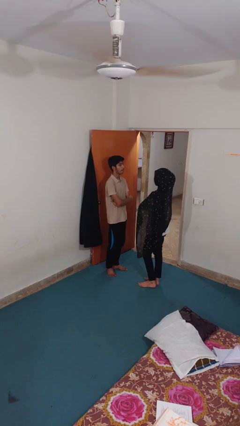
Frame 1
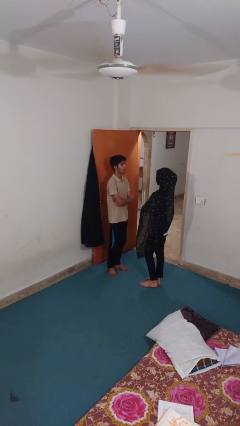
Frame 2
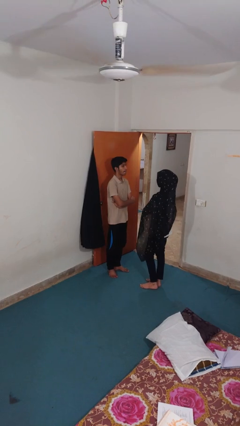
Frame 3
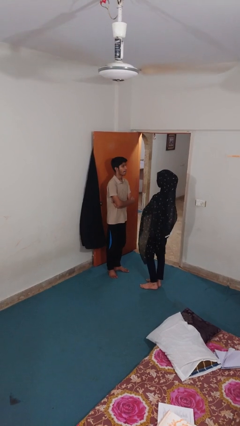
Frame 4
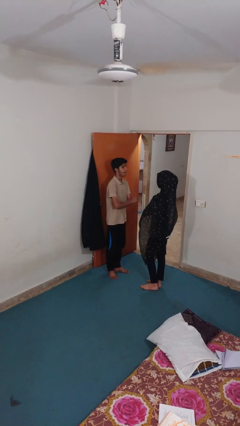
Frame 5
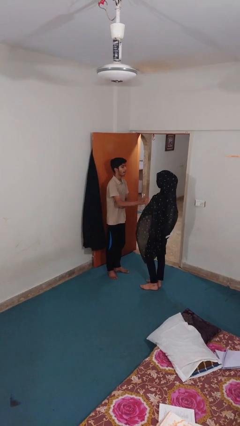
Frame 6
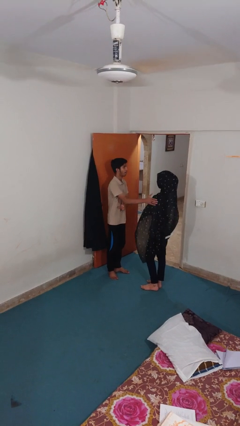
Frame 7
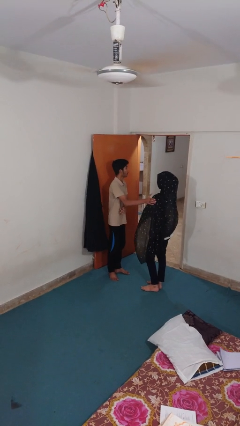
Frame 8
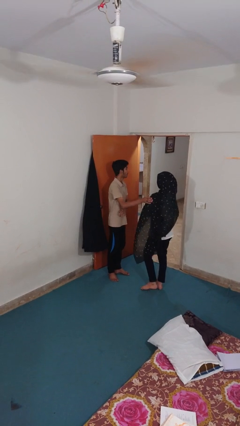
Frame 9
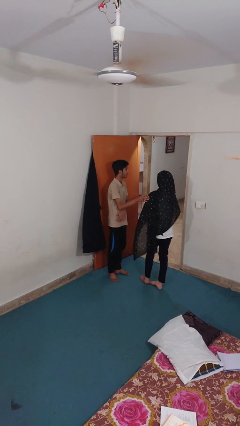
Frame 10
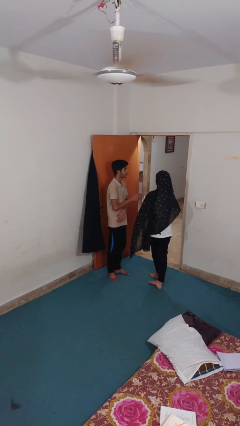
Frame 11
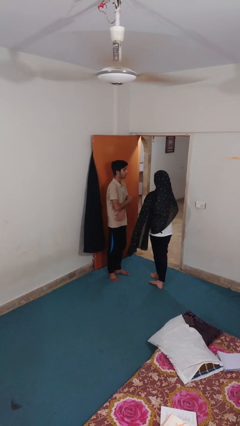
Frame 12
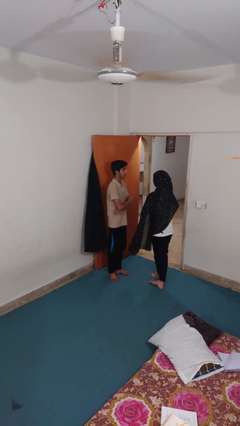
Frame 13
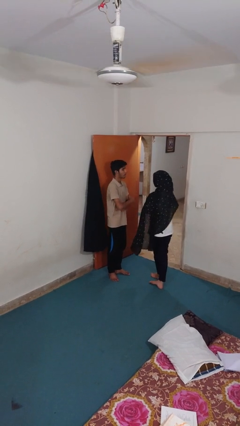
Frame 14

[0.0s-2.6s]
person shoves person

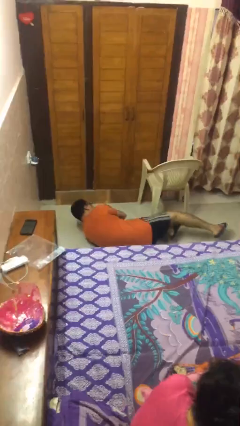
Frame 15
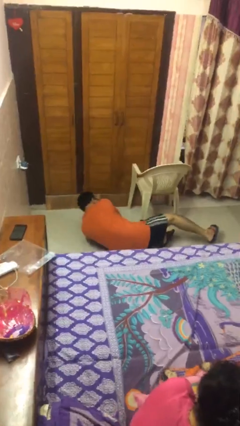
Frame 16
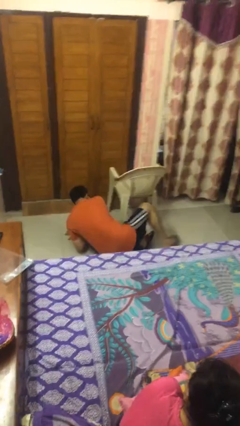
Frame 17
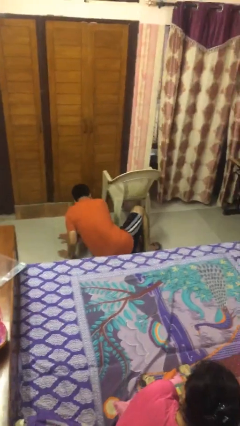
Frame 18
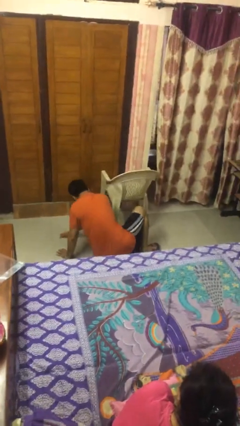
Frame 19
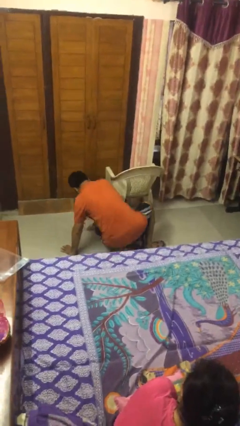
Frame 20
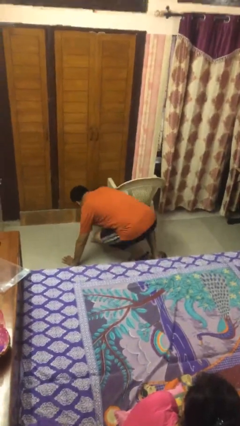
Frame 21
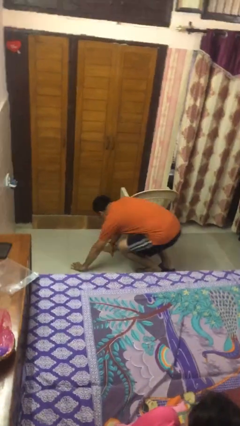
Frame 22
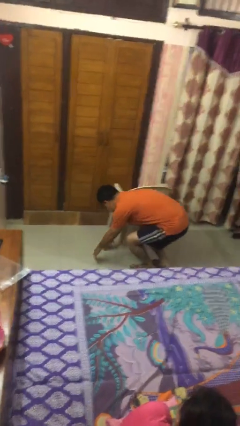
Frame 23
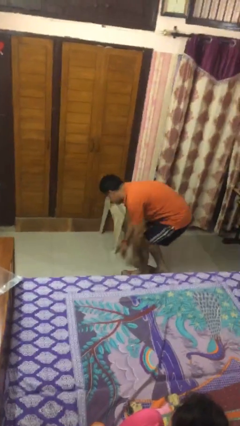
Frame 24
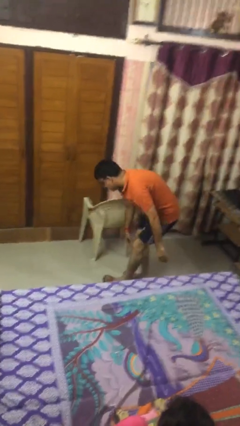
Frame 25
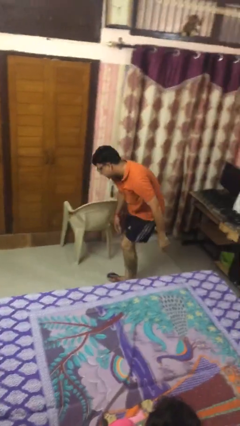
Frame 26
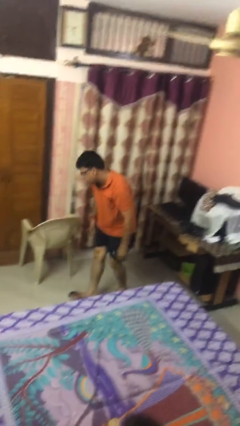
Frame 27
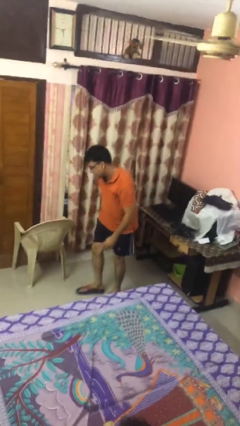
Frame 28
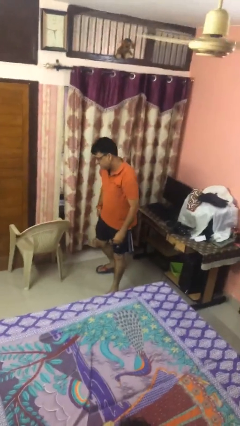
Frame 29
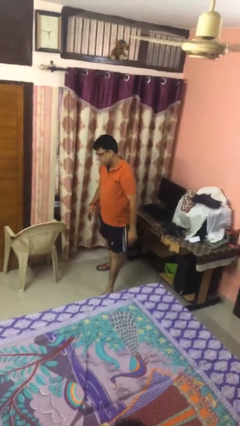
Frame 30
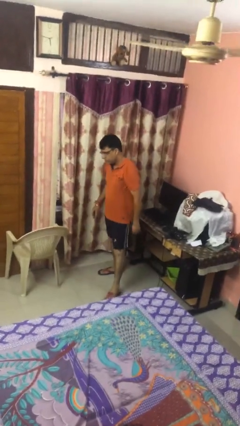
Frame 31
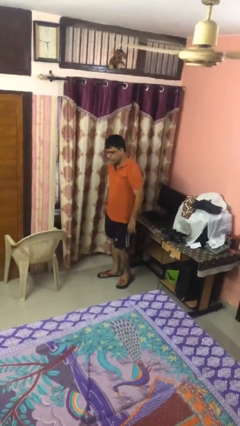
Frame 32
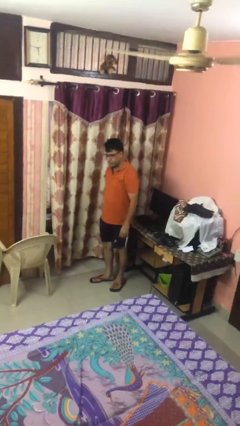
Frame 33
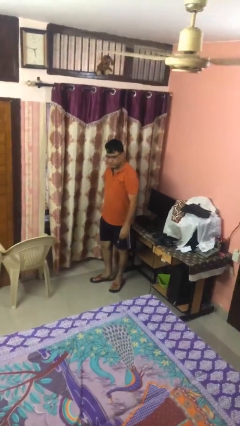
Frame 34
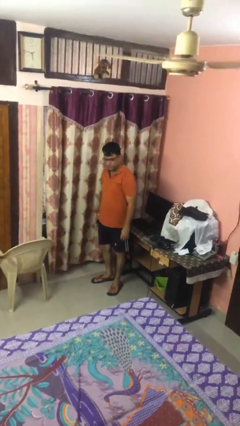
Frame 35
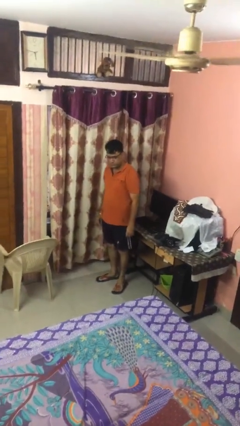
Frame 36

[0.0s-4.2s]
person stands up from floor

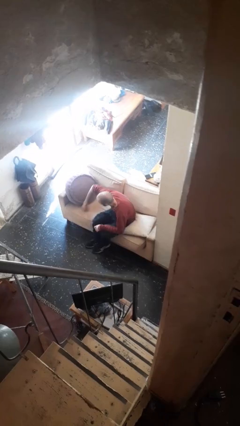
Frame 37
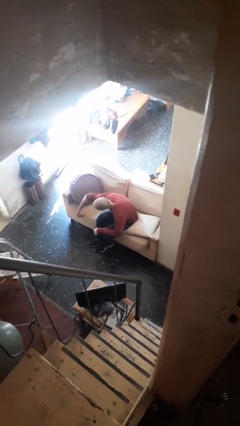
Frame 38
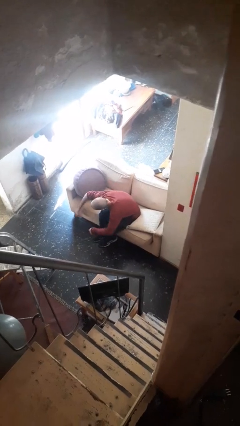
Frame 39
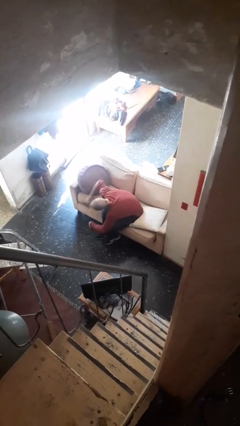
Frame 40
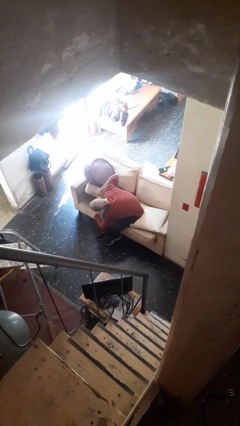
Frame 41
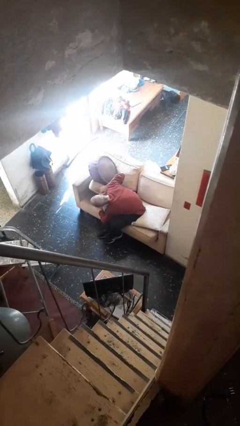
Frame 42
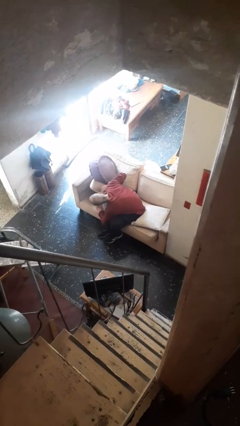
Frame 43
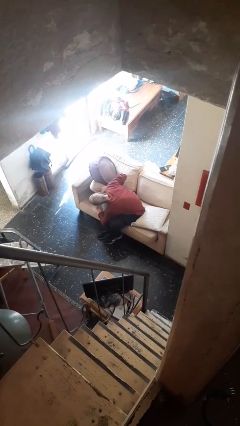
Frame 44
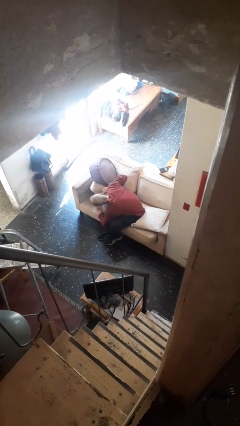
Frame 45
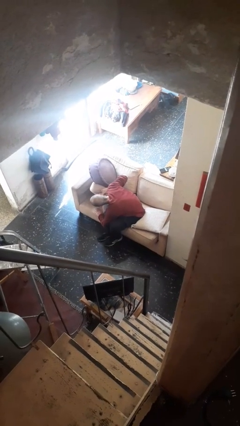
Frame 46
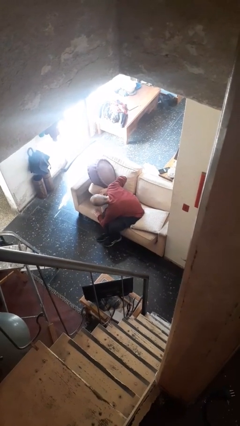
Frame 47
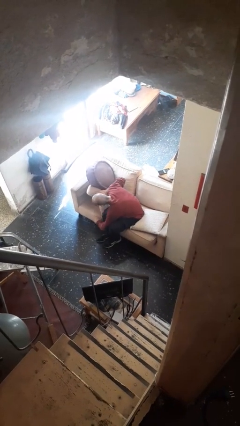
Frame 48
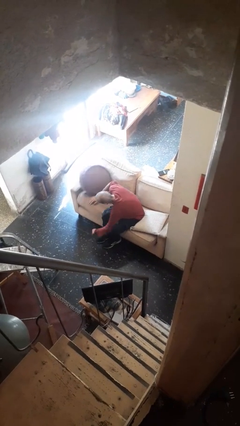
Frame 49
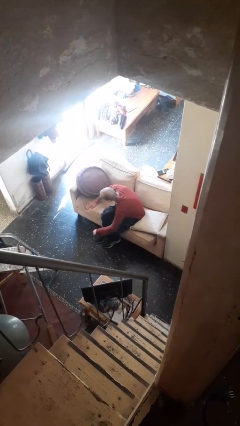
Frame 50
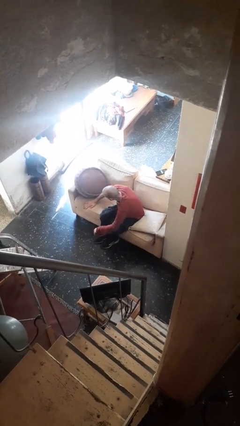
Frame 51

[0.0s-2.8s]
person searches in couch

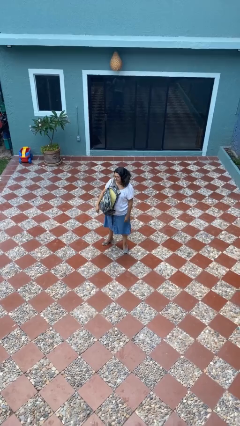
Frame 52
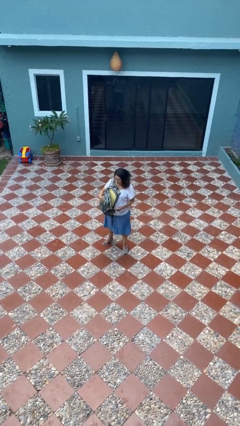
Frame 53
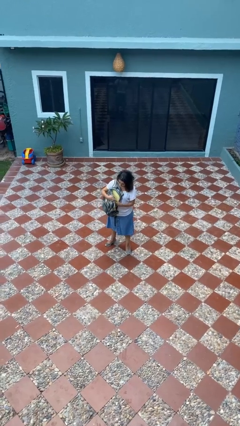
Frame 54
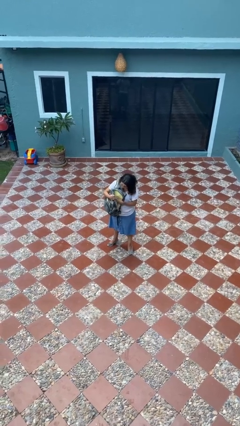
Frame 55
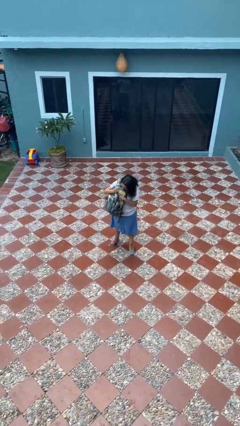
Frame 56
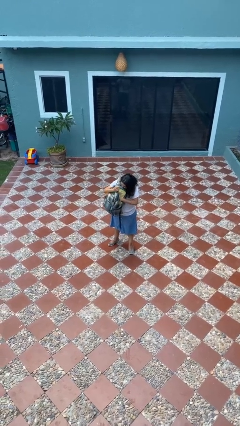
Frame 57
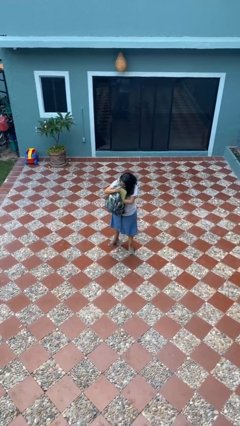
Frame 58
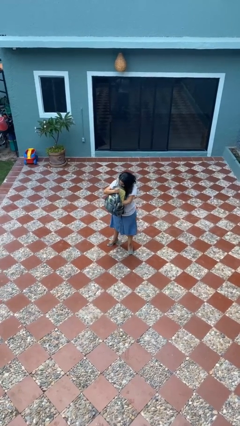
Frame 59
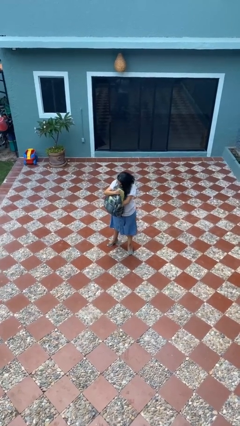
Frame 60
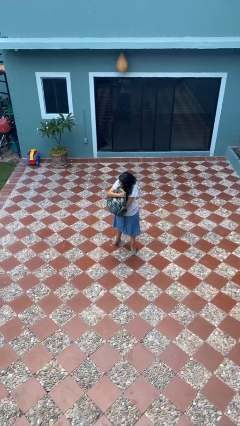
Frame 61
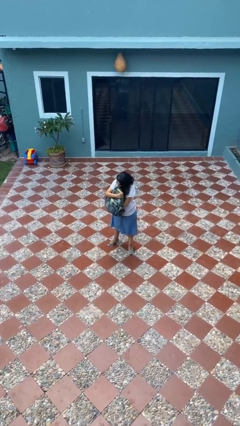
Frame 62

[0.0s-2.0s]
person searches in backpack

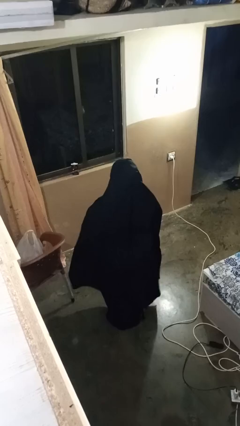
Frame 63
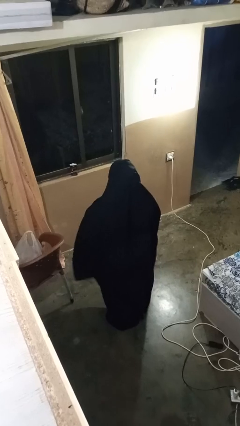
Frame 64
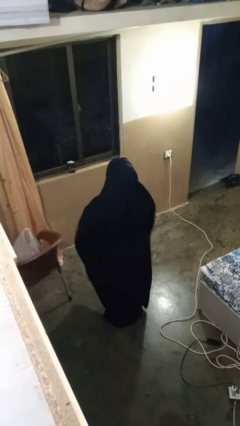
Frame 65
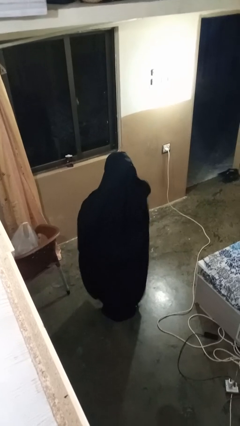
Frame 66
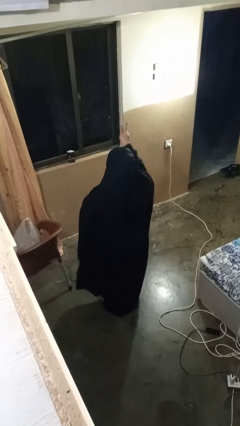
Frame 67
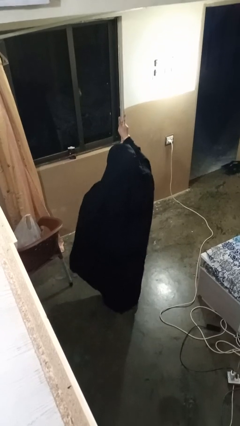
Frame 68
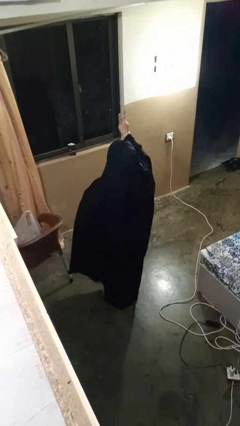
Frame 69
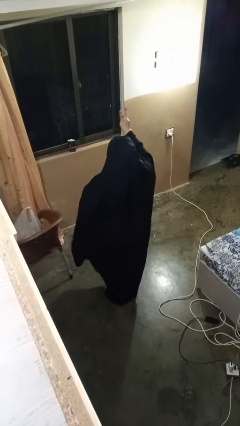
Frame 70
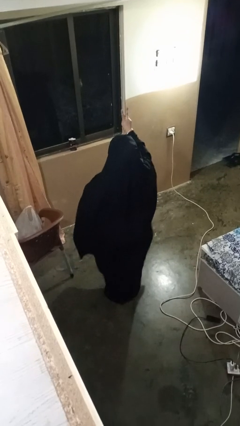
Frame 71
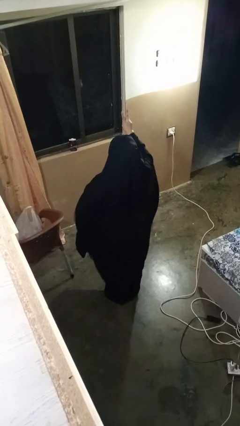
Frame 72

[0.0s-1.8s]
person gestures peace

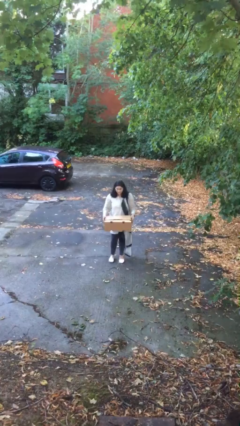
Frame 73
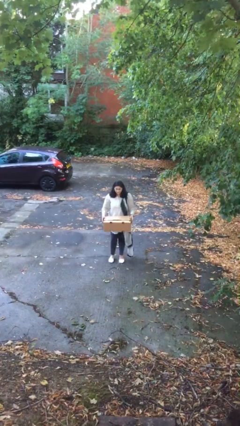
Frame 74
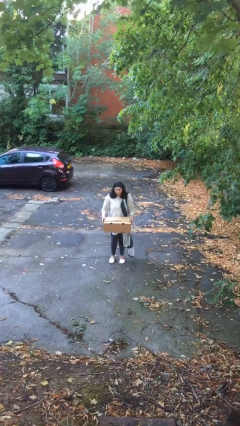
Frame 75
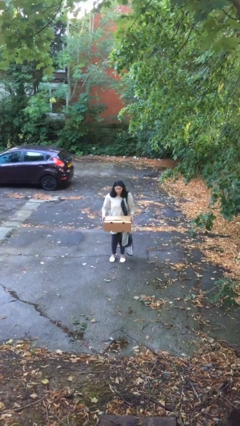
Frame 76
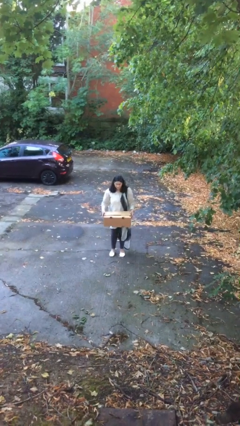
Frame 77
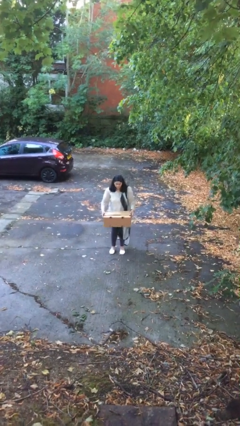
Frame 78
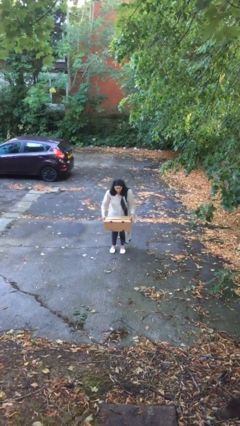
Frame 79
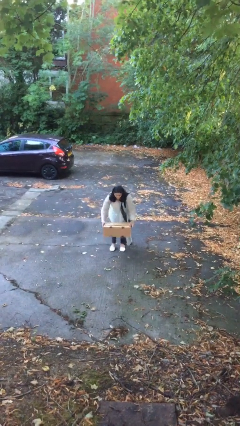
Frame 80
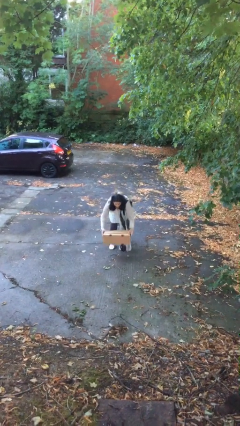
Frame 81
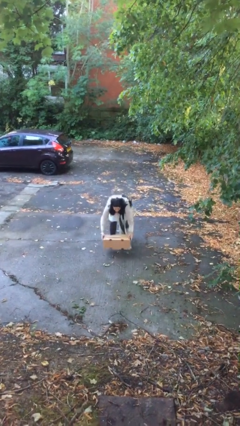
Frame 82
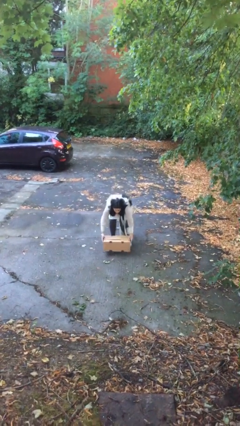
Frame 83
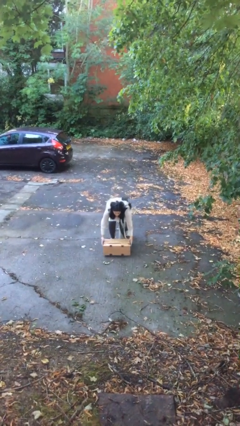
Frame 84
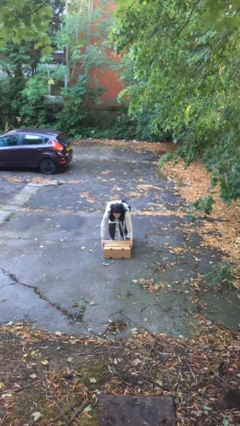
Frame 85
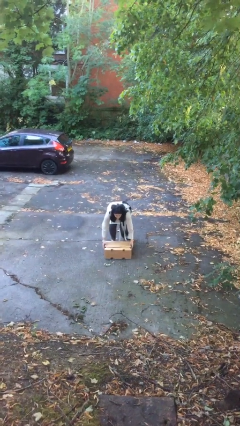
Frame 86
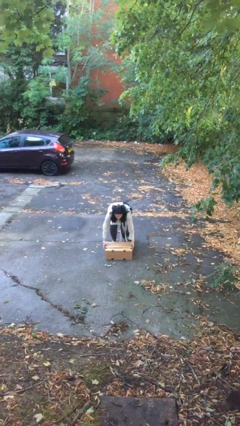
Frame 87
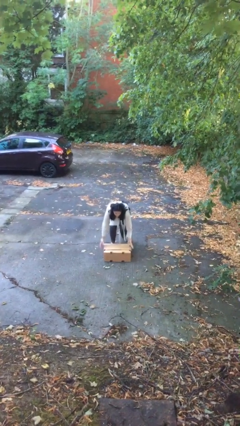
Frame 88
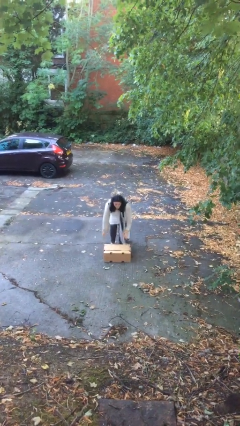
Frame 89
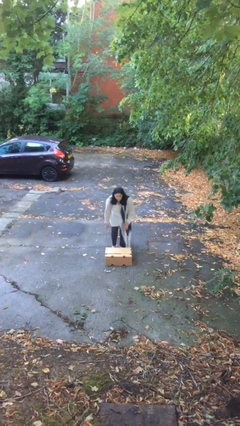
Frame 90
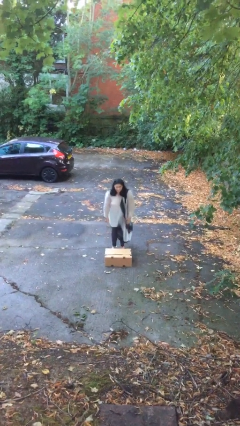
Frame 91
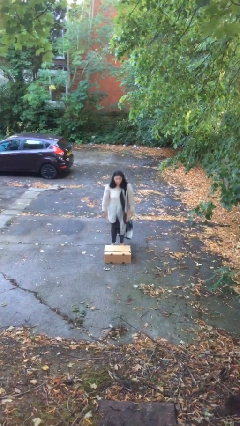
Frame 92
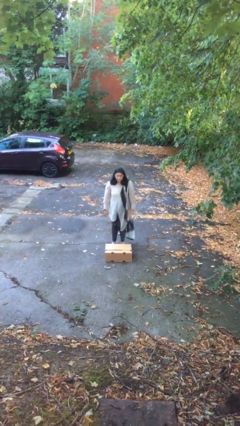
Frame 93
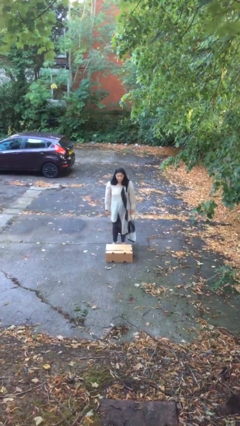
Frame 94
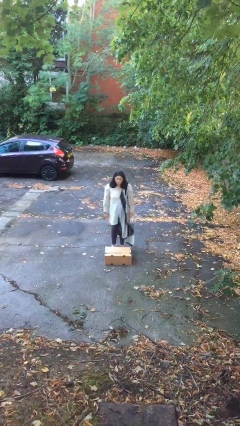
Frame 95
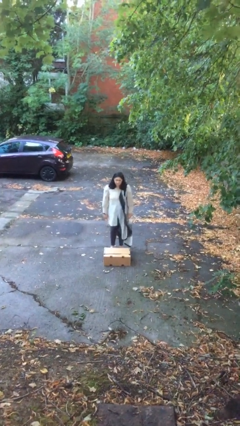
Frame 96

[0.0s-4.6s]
person puts down object on floor
